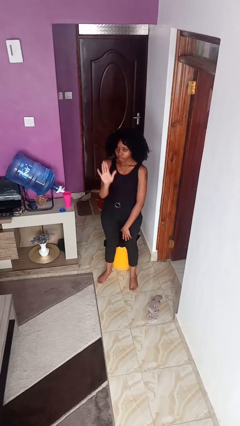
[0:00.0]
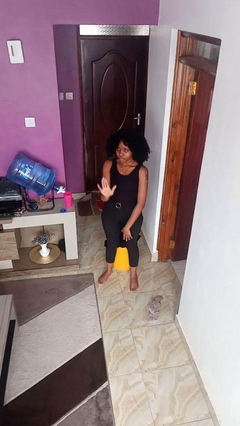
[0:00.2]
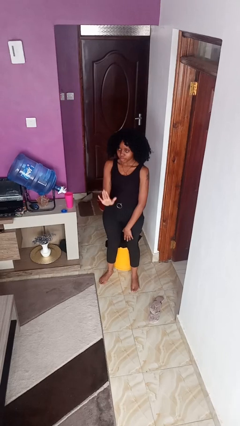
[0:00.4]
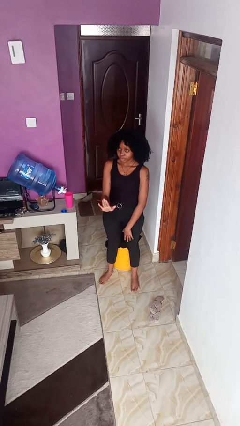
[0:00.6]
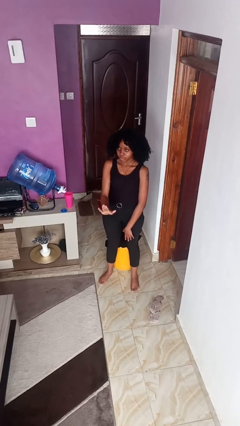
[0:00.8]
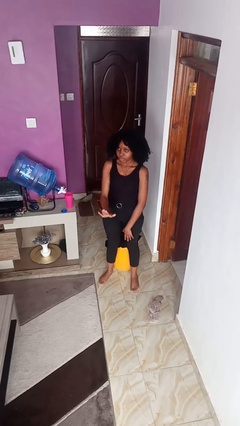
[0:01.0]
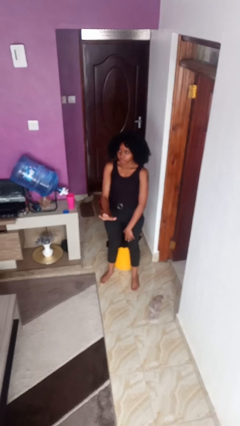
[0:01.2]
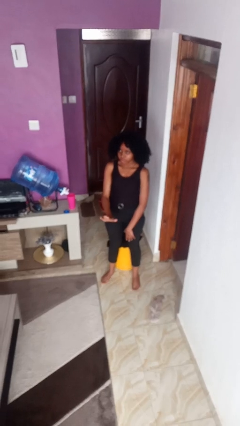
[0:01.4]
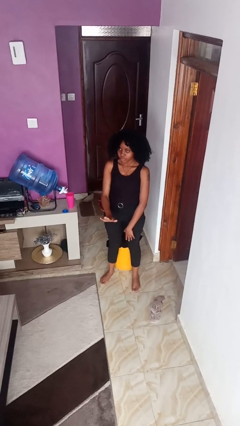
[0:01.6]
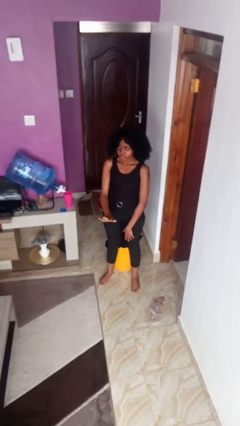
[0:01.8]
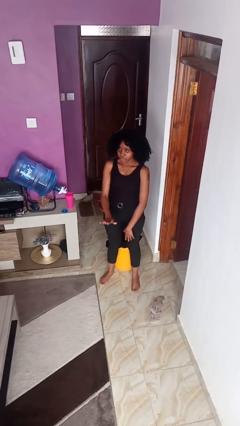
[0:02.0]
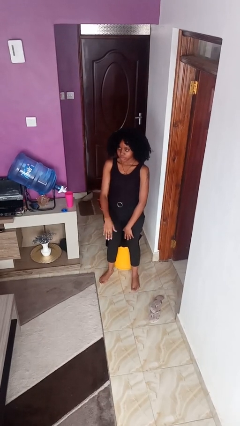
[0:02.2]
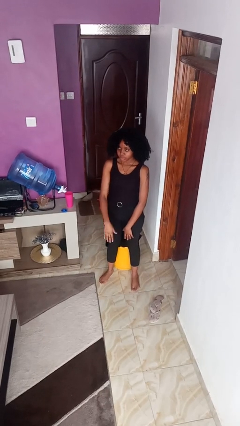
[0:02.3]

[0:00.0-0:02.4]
person gestures swipe down

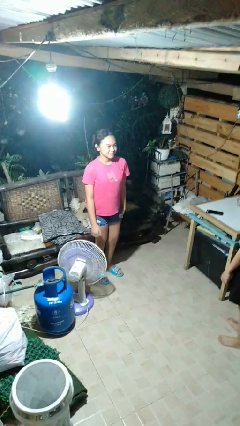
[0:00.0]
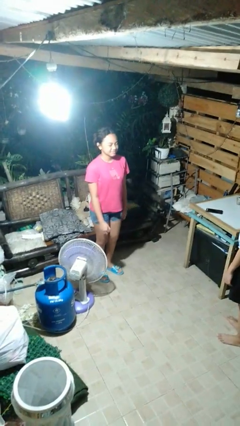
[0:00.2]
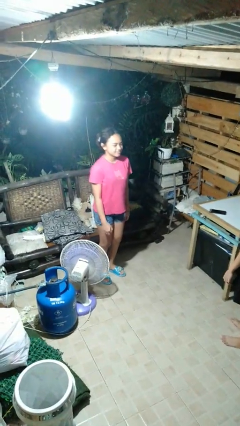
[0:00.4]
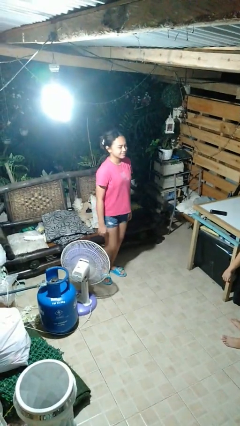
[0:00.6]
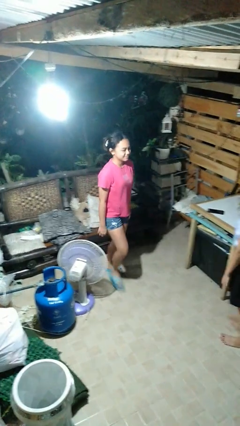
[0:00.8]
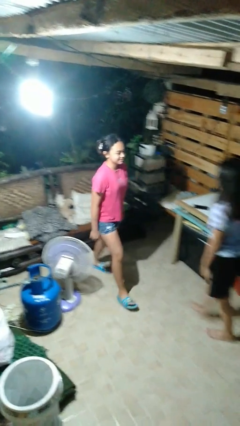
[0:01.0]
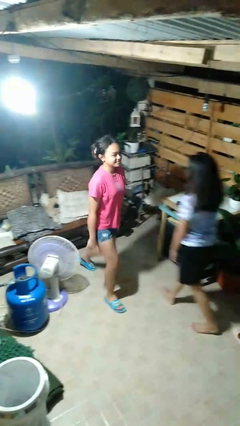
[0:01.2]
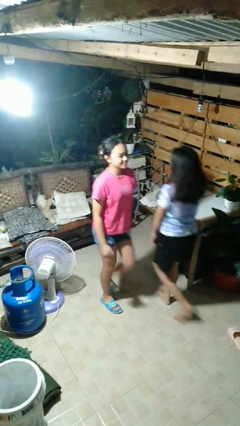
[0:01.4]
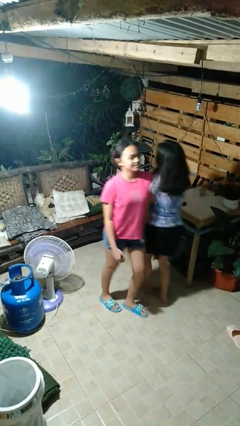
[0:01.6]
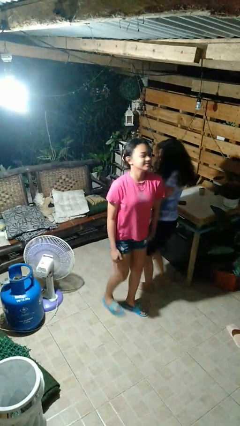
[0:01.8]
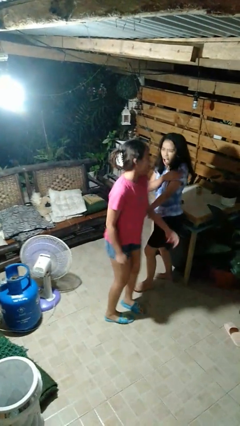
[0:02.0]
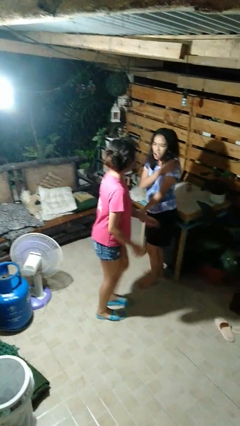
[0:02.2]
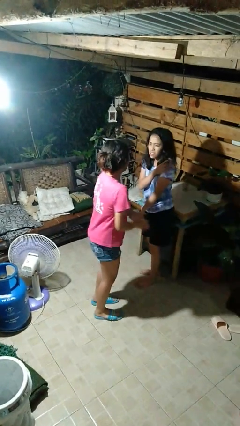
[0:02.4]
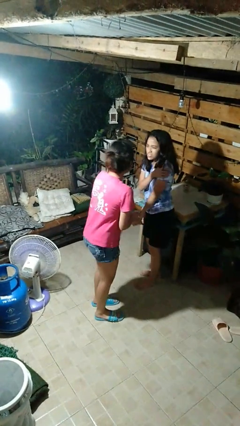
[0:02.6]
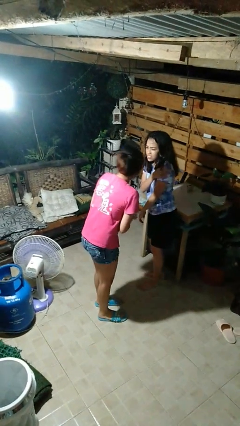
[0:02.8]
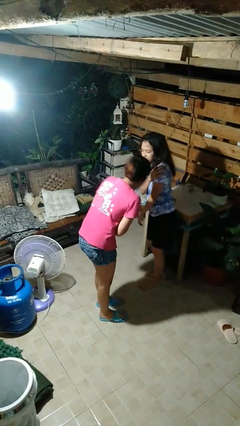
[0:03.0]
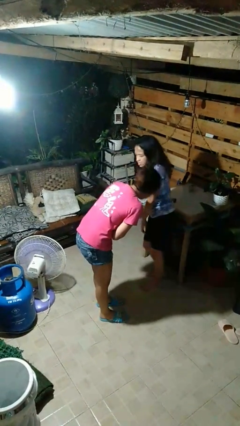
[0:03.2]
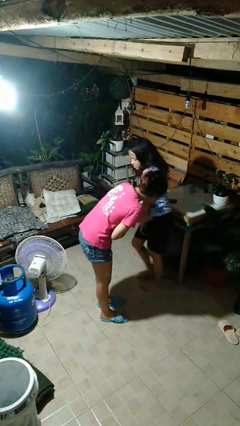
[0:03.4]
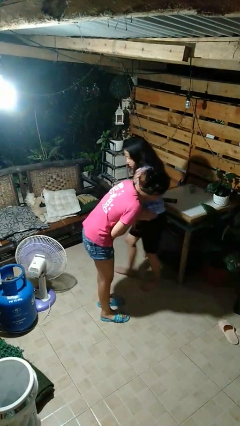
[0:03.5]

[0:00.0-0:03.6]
person bumps into person

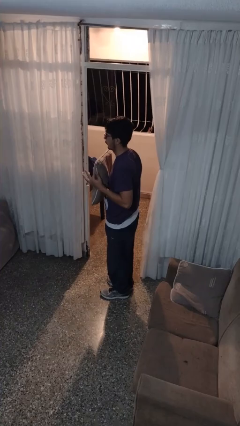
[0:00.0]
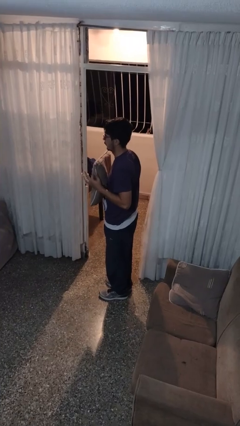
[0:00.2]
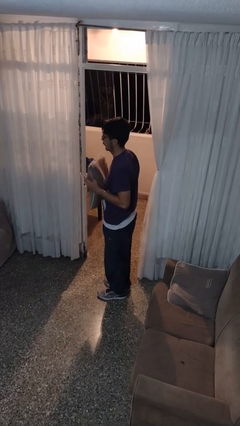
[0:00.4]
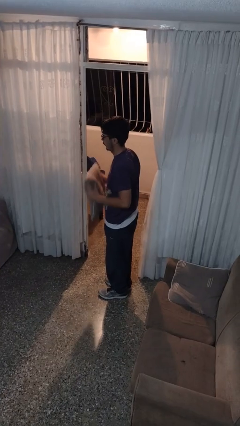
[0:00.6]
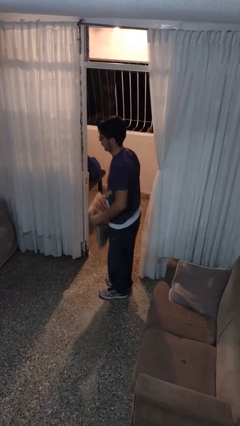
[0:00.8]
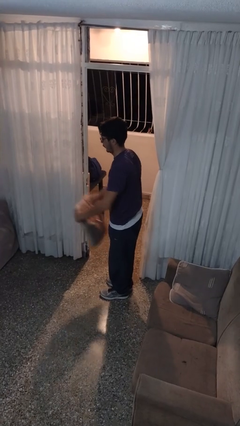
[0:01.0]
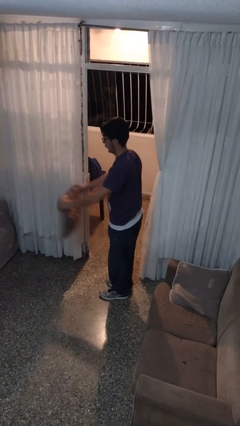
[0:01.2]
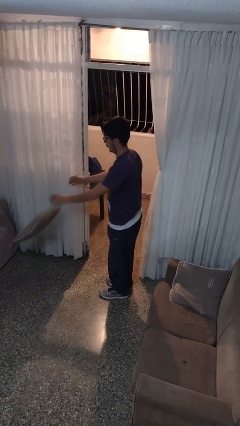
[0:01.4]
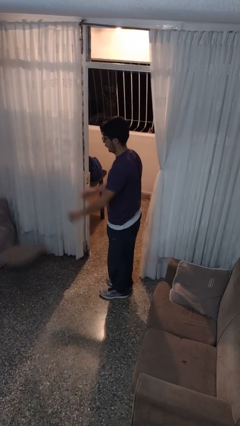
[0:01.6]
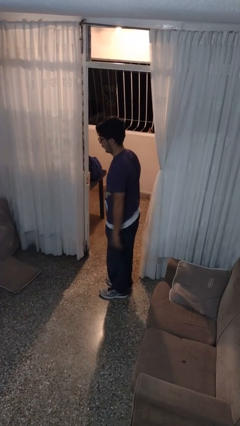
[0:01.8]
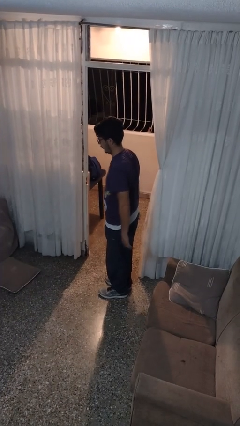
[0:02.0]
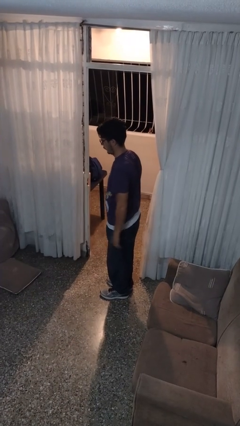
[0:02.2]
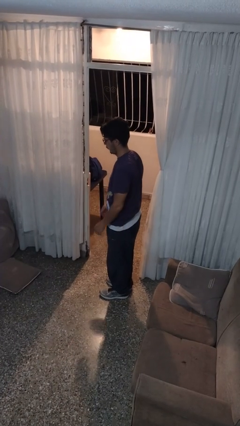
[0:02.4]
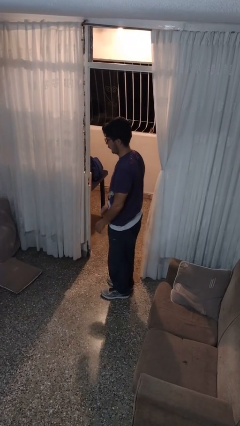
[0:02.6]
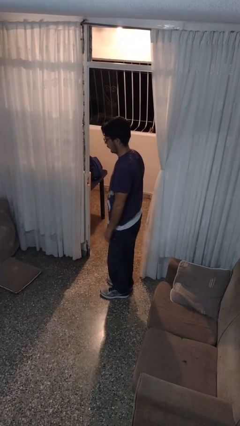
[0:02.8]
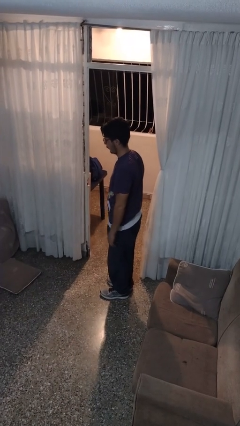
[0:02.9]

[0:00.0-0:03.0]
person throws object to ground

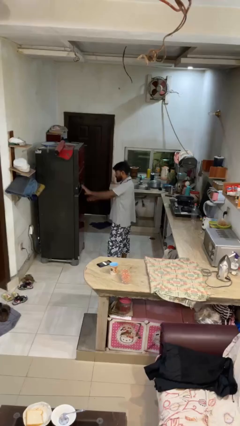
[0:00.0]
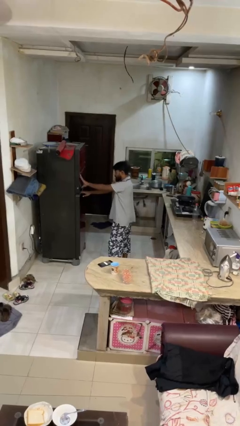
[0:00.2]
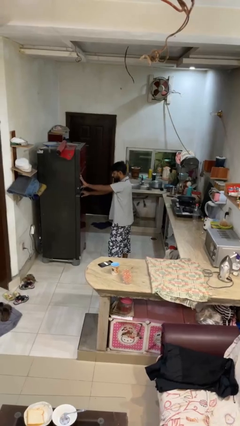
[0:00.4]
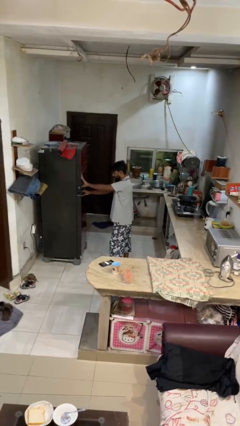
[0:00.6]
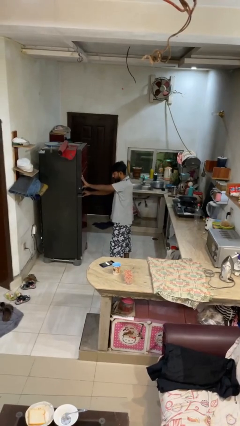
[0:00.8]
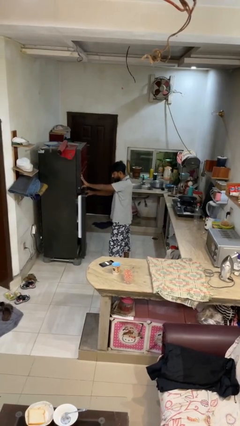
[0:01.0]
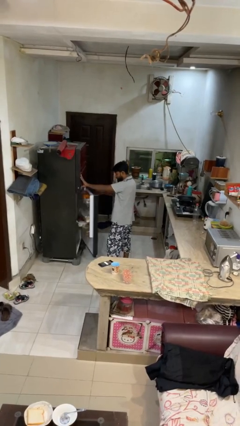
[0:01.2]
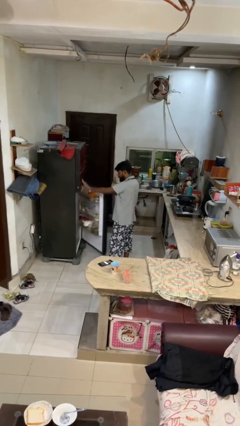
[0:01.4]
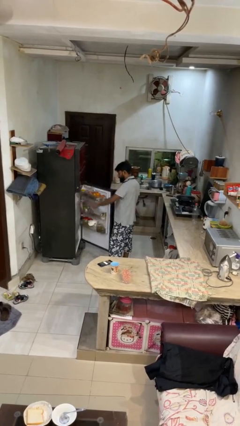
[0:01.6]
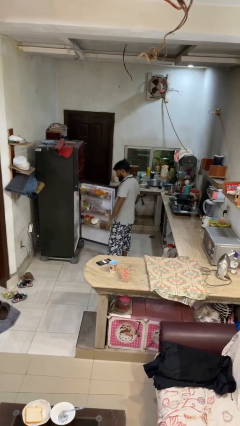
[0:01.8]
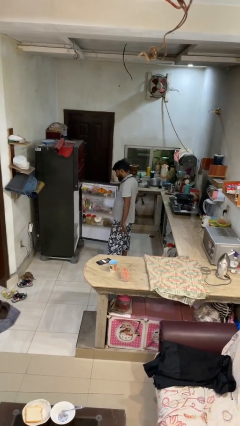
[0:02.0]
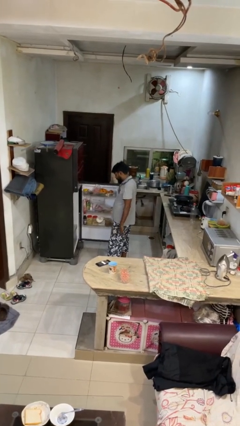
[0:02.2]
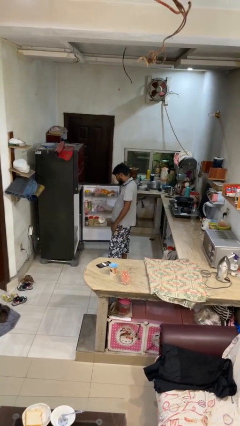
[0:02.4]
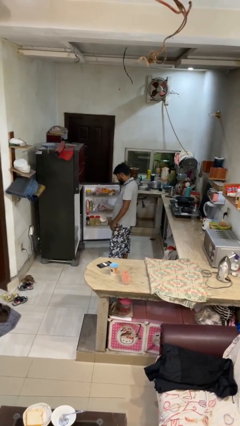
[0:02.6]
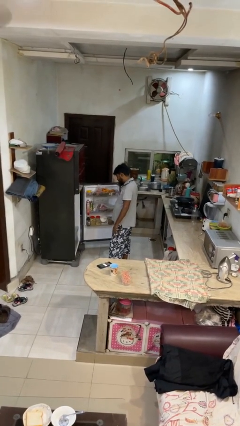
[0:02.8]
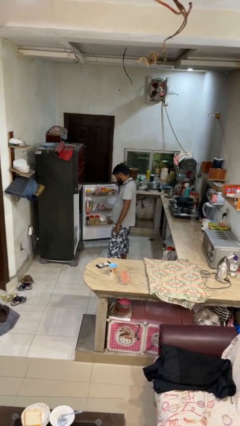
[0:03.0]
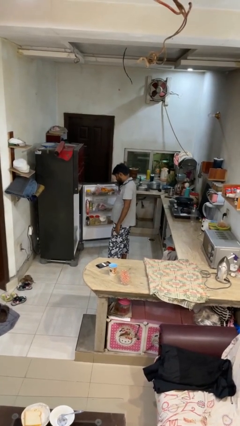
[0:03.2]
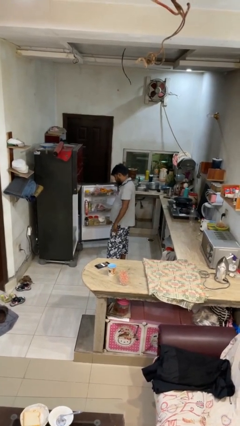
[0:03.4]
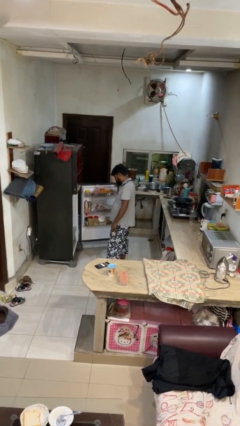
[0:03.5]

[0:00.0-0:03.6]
person opens refrigerator

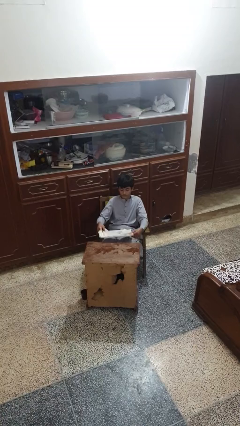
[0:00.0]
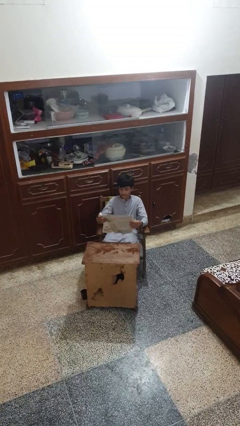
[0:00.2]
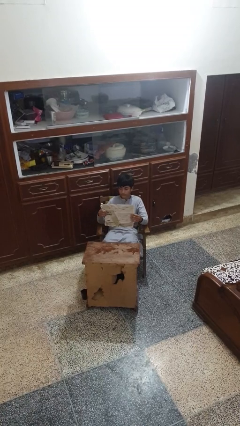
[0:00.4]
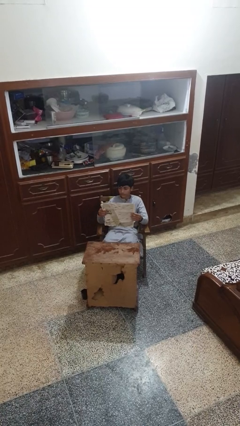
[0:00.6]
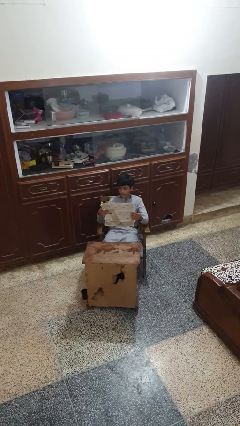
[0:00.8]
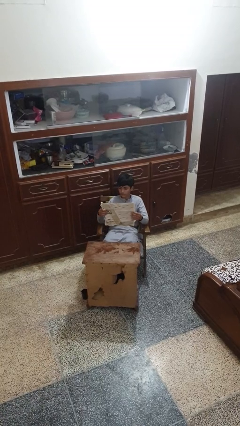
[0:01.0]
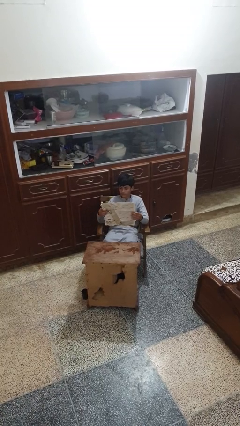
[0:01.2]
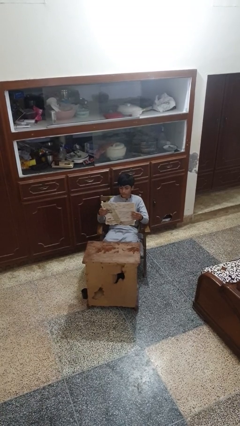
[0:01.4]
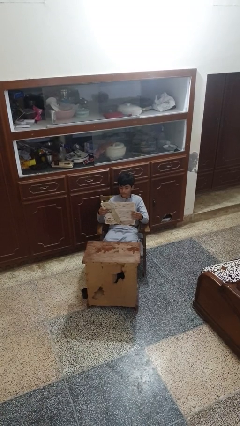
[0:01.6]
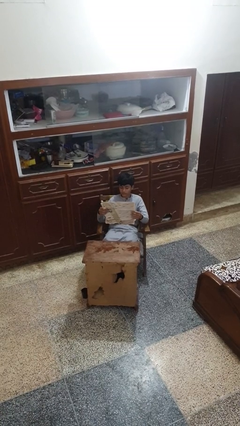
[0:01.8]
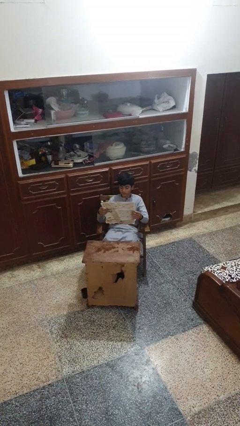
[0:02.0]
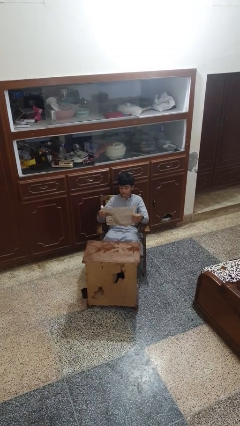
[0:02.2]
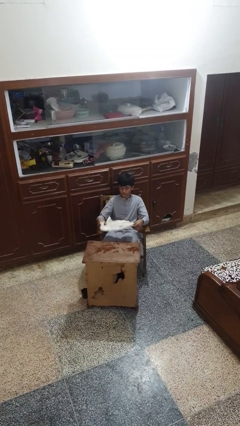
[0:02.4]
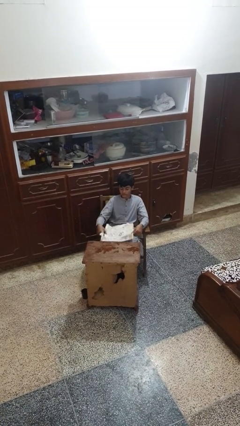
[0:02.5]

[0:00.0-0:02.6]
person reads newspaper

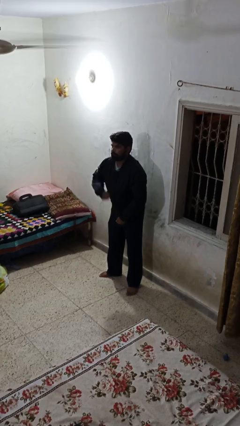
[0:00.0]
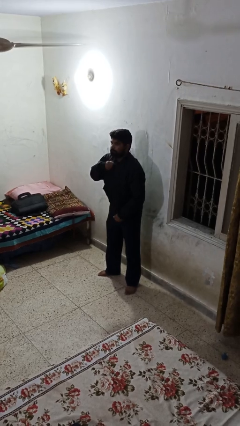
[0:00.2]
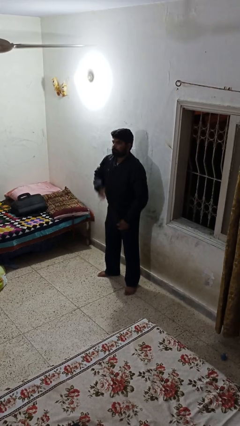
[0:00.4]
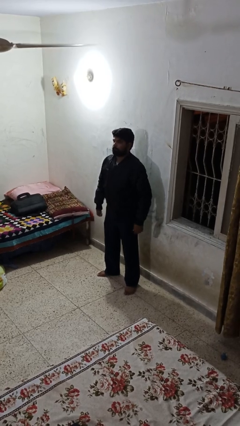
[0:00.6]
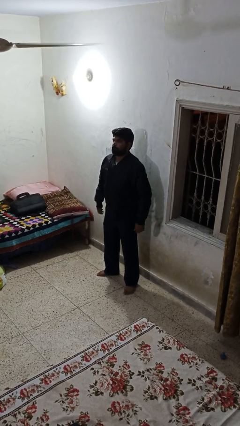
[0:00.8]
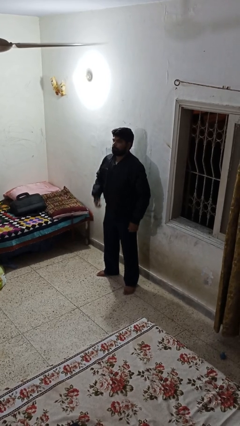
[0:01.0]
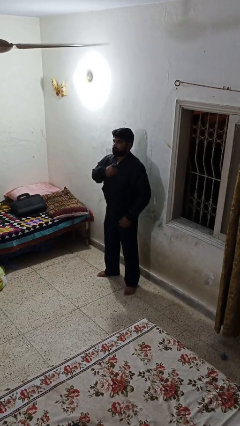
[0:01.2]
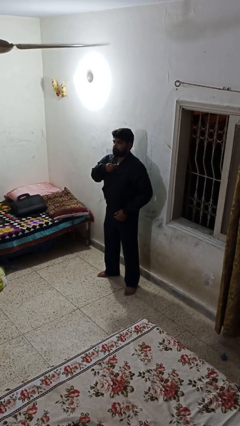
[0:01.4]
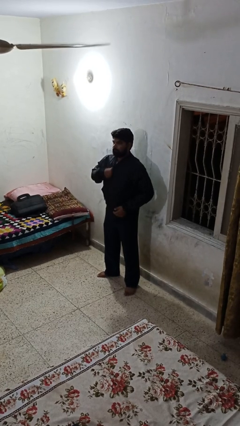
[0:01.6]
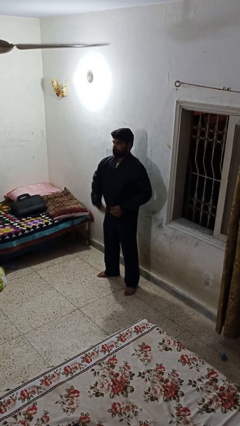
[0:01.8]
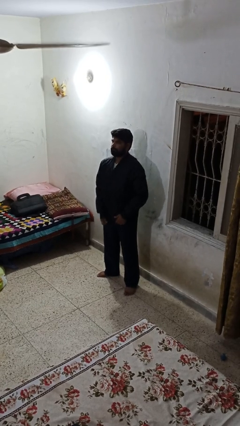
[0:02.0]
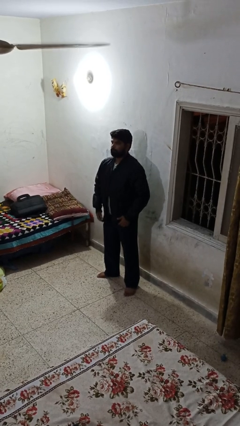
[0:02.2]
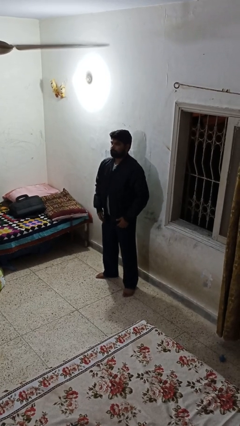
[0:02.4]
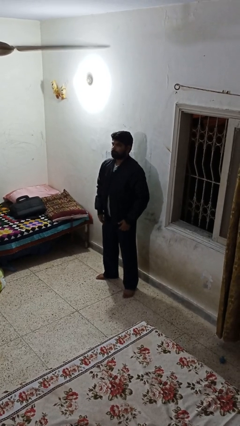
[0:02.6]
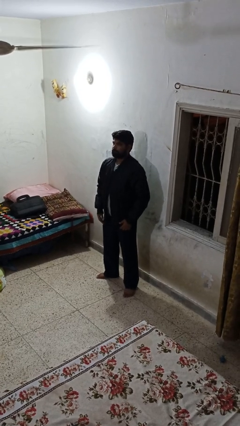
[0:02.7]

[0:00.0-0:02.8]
person unzips jacket
